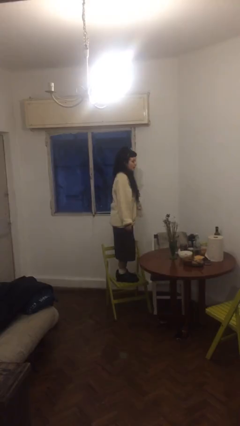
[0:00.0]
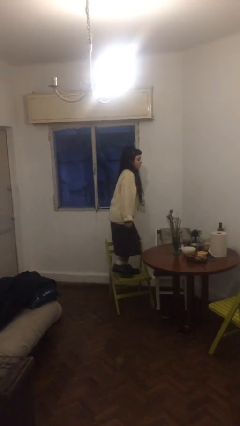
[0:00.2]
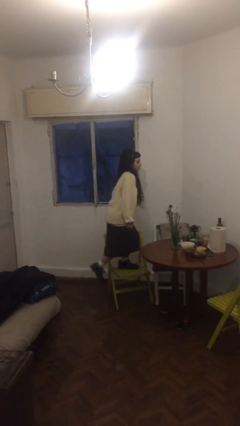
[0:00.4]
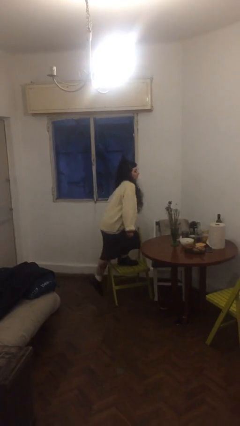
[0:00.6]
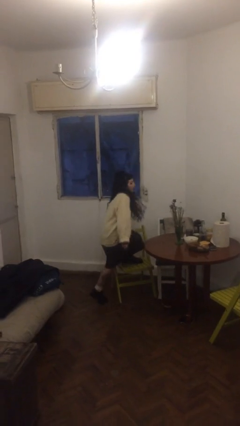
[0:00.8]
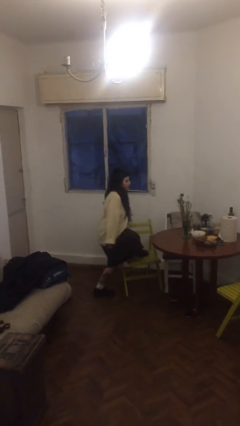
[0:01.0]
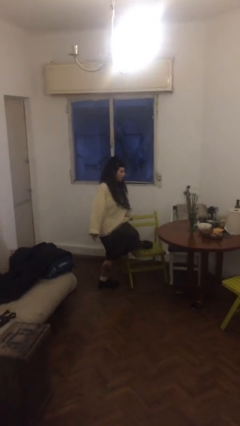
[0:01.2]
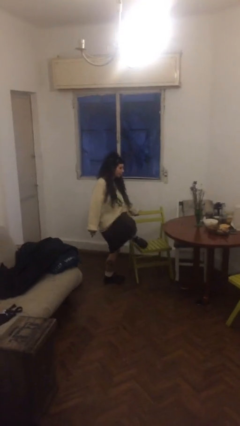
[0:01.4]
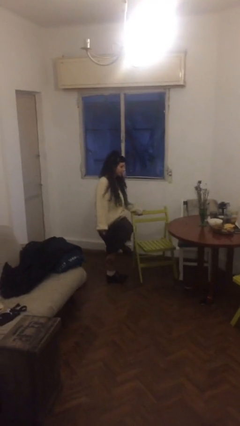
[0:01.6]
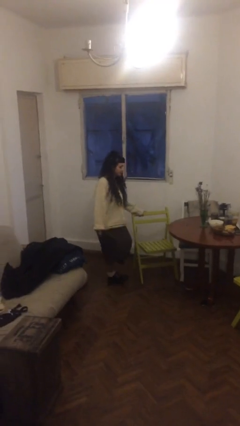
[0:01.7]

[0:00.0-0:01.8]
person climbs off chair

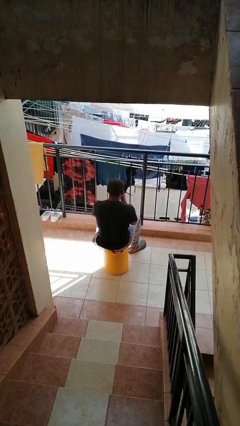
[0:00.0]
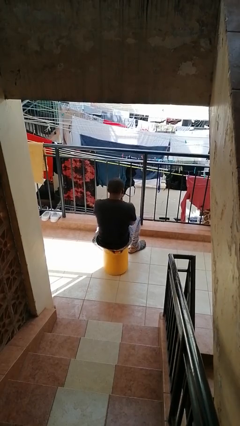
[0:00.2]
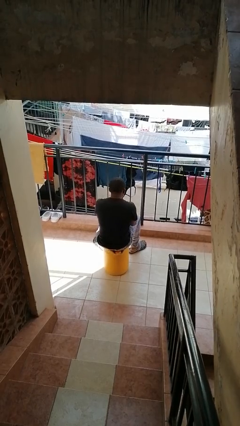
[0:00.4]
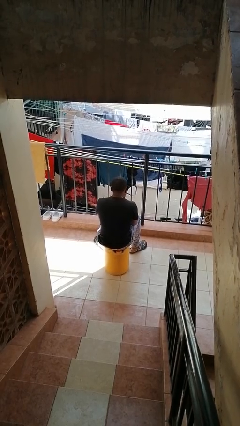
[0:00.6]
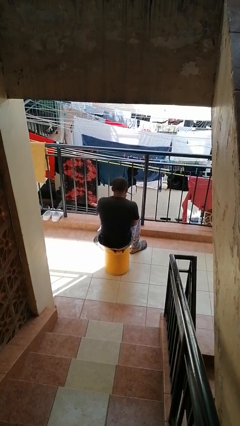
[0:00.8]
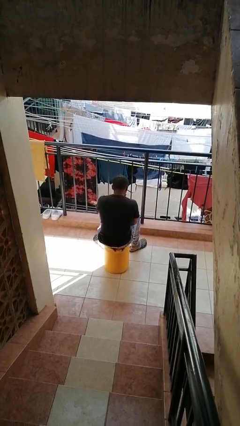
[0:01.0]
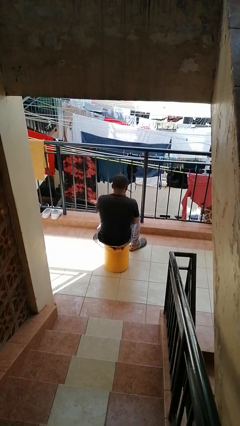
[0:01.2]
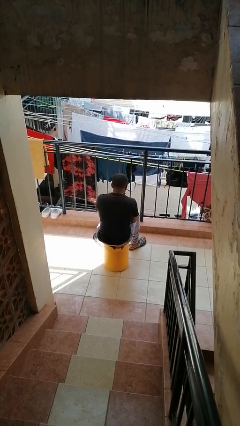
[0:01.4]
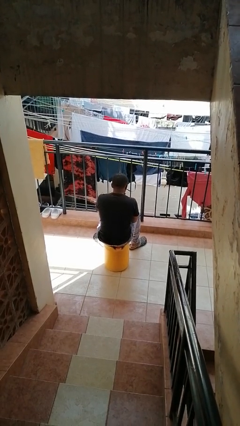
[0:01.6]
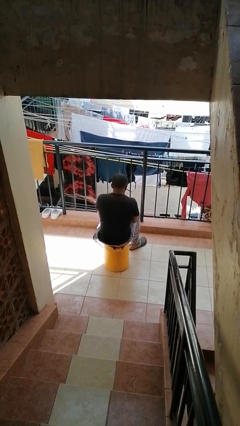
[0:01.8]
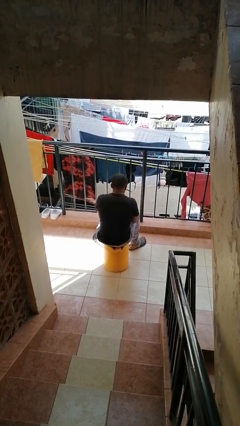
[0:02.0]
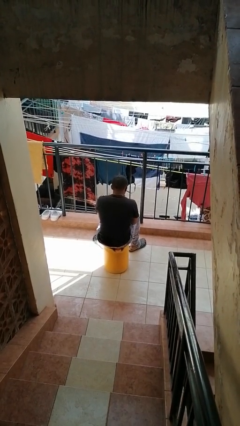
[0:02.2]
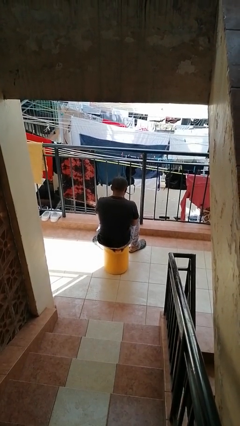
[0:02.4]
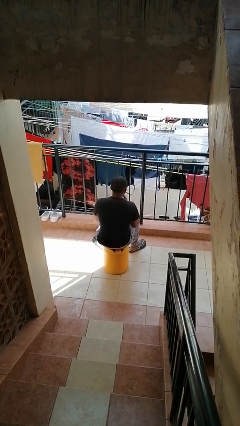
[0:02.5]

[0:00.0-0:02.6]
person blows into hands

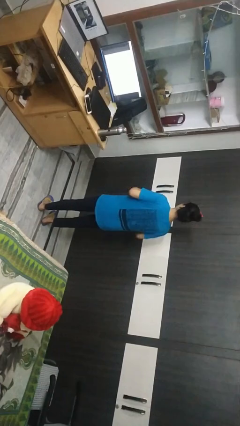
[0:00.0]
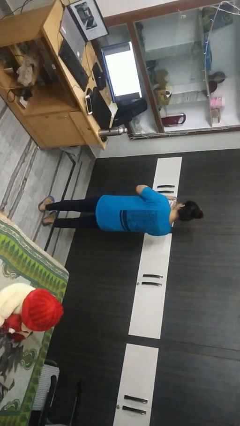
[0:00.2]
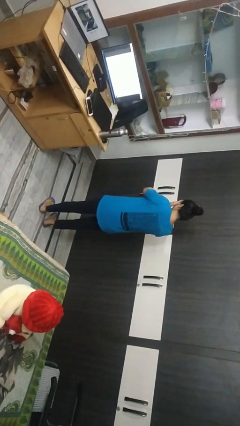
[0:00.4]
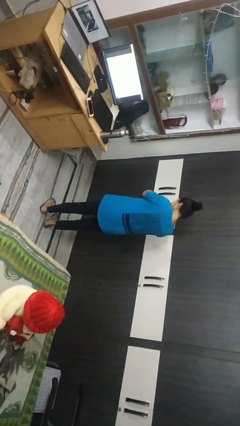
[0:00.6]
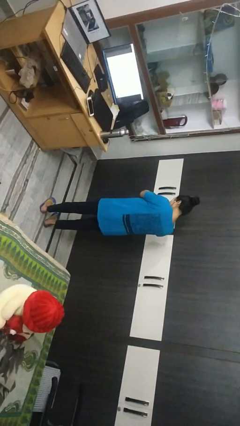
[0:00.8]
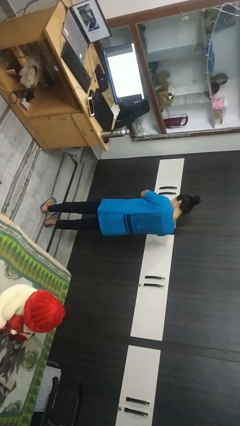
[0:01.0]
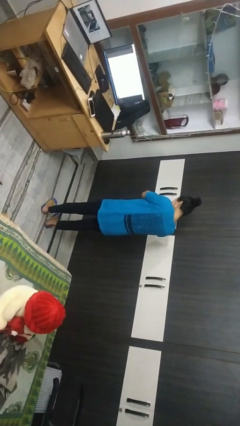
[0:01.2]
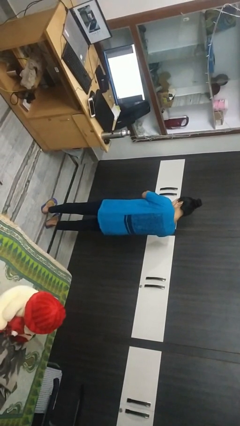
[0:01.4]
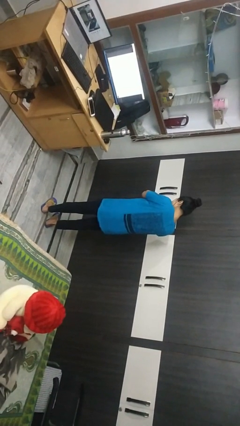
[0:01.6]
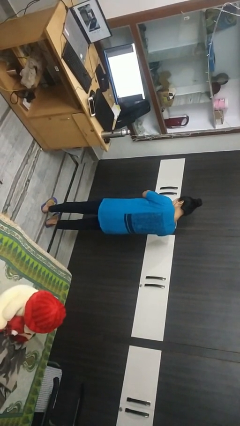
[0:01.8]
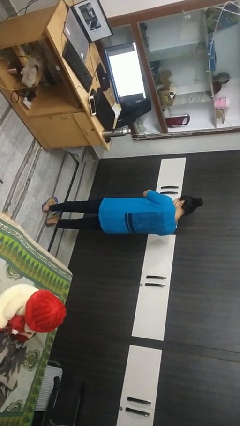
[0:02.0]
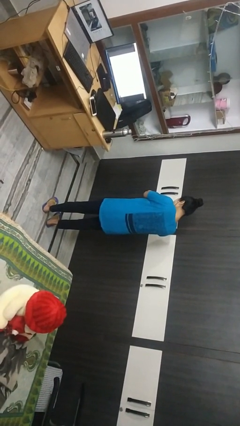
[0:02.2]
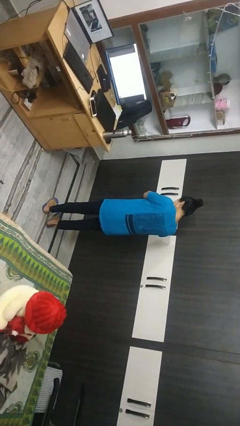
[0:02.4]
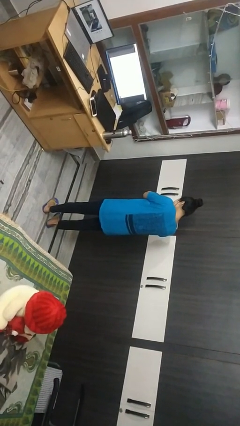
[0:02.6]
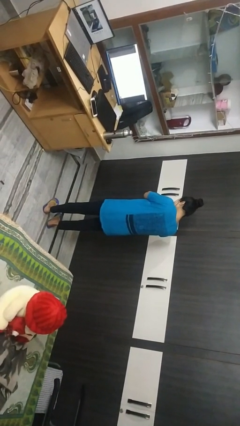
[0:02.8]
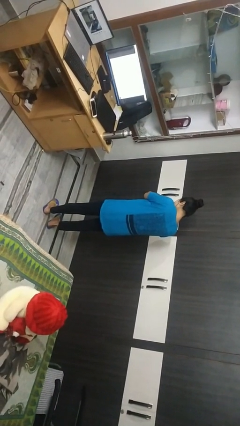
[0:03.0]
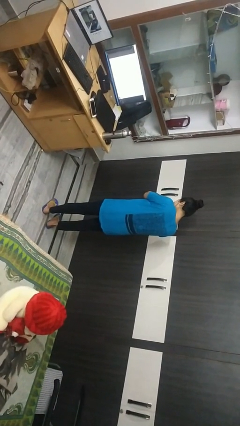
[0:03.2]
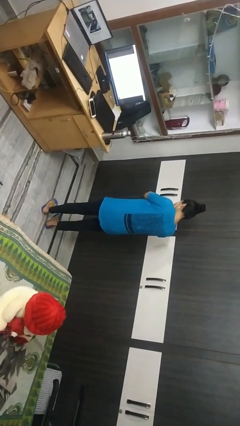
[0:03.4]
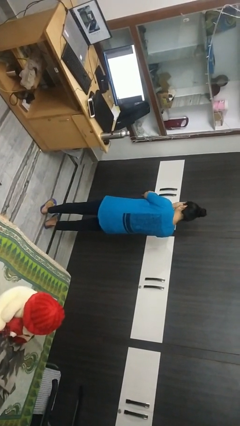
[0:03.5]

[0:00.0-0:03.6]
person covers face with hands

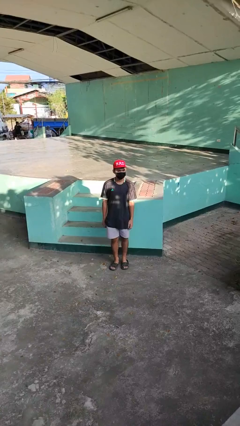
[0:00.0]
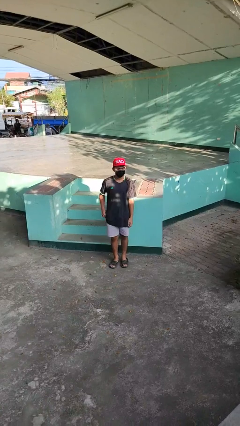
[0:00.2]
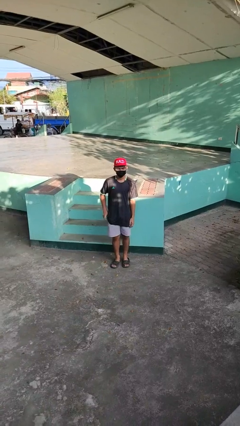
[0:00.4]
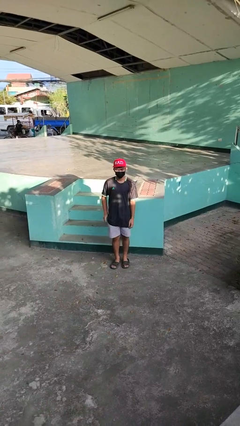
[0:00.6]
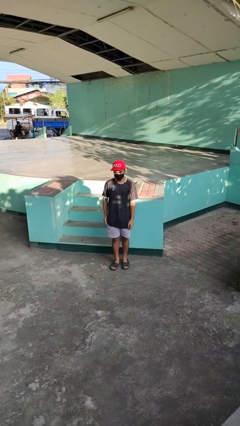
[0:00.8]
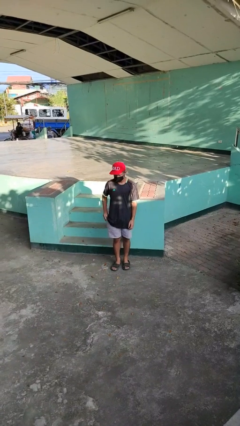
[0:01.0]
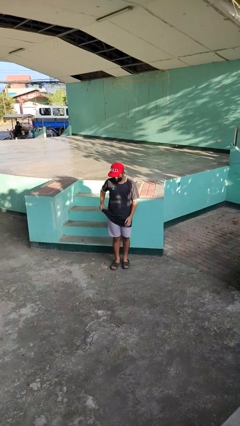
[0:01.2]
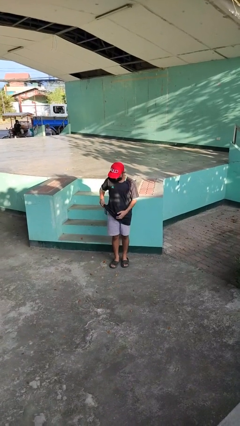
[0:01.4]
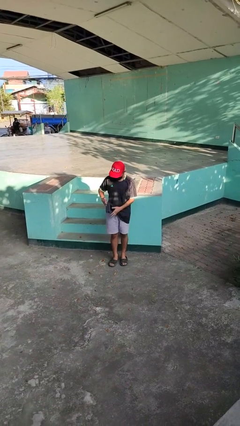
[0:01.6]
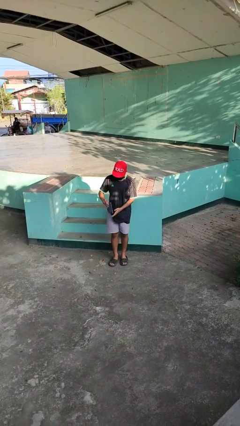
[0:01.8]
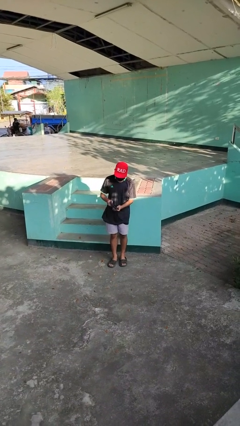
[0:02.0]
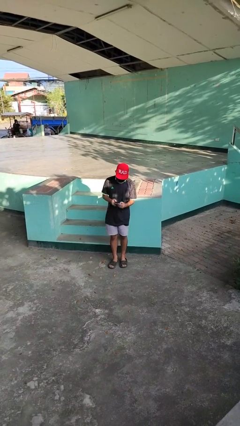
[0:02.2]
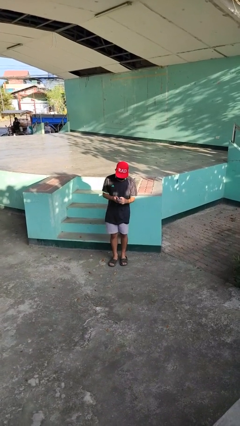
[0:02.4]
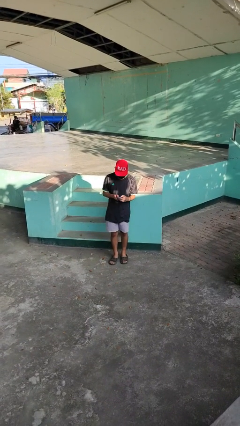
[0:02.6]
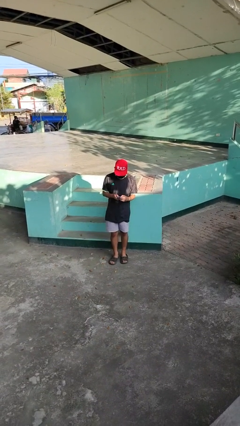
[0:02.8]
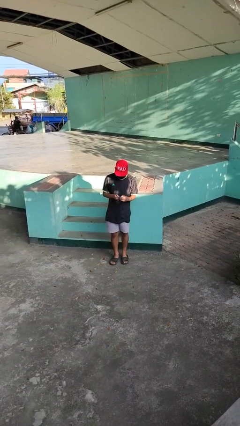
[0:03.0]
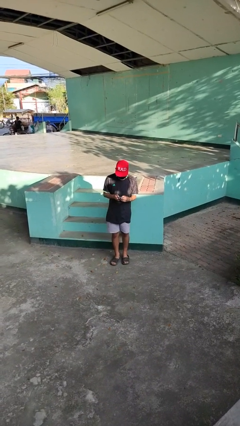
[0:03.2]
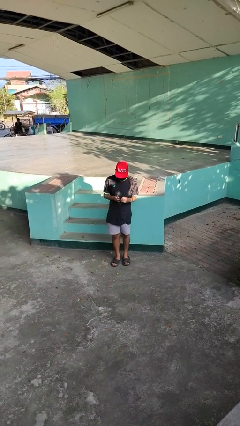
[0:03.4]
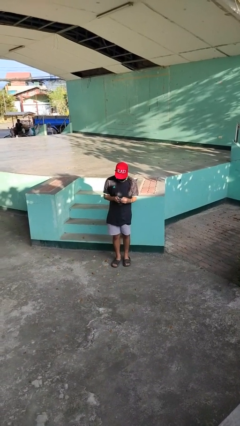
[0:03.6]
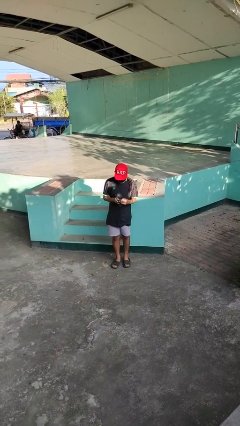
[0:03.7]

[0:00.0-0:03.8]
person takes phone from pocket

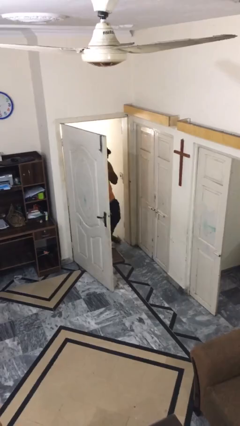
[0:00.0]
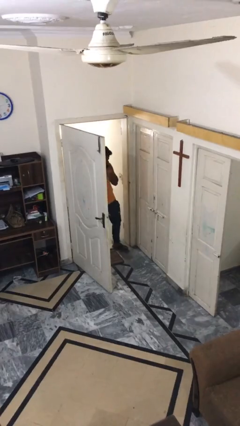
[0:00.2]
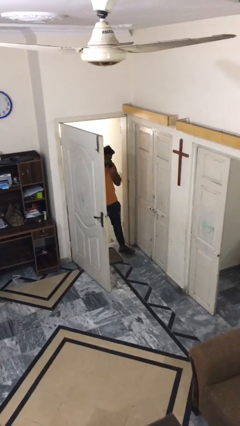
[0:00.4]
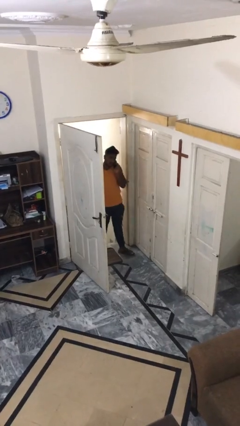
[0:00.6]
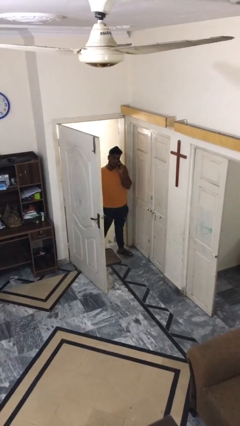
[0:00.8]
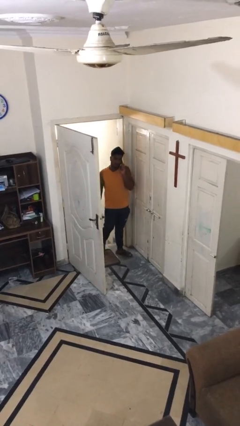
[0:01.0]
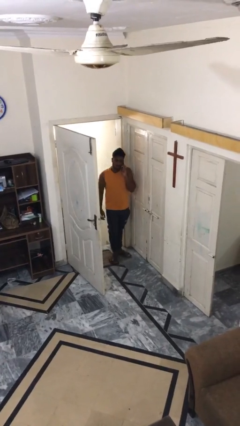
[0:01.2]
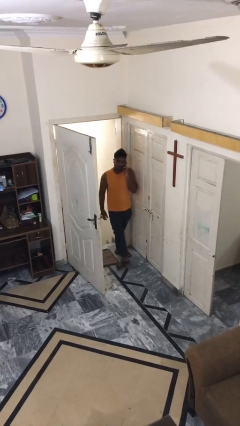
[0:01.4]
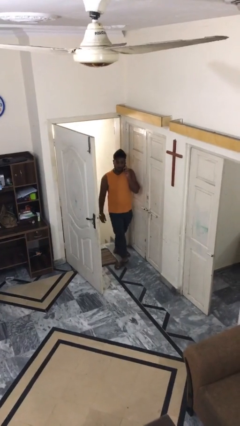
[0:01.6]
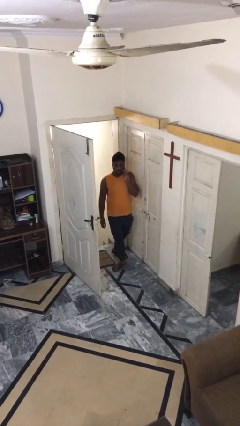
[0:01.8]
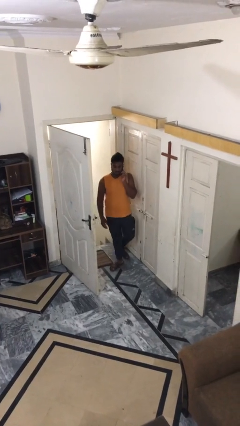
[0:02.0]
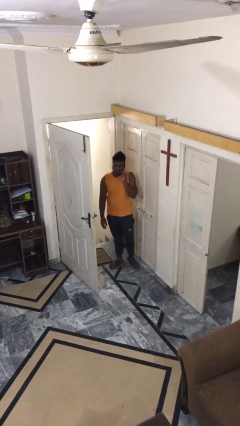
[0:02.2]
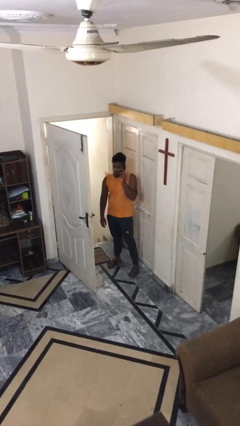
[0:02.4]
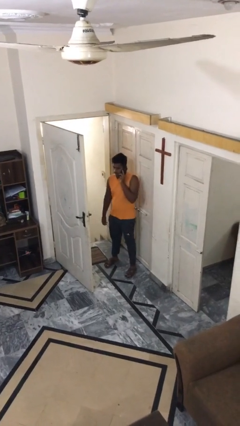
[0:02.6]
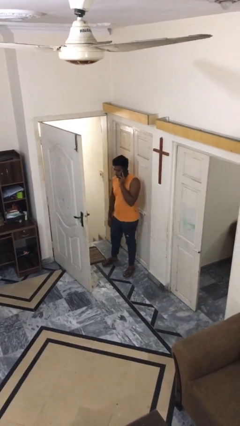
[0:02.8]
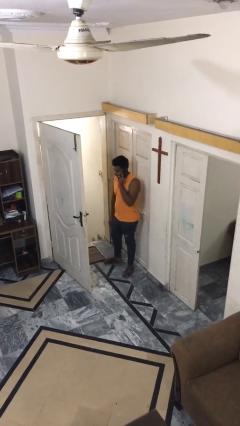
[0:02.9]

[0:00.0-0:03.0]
person enters scene through structure

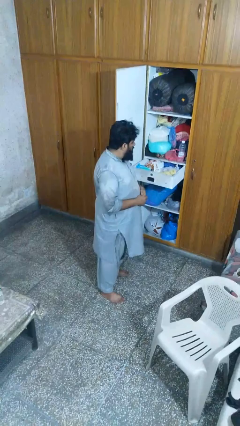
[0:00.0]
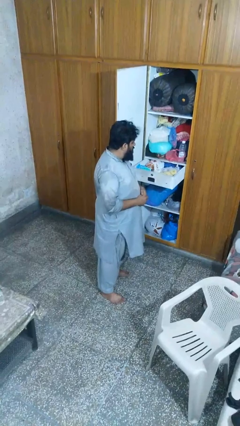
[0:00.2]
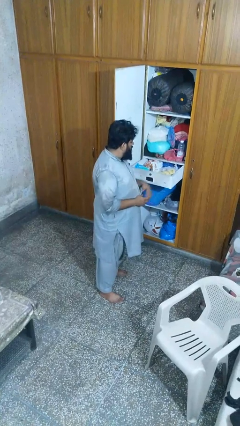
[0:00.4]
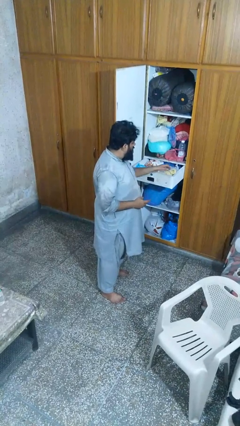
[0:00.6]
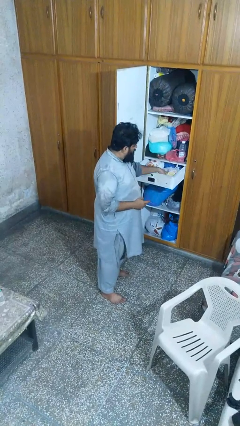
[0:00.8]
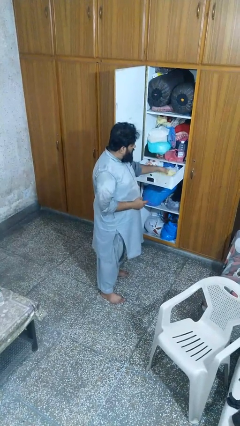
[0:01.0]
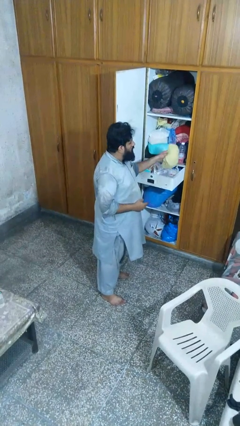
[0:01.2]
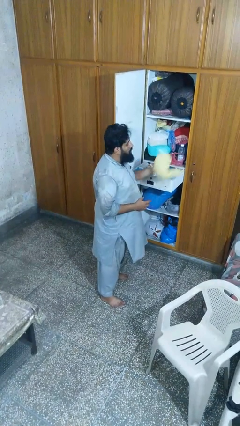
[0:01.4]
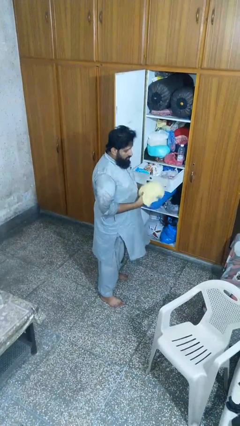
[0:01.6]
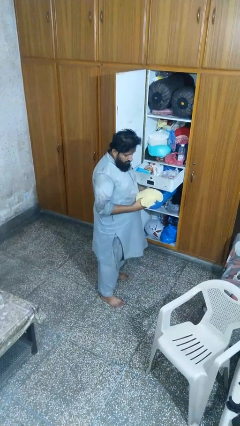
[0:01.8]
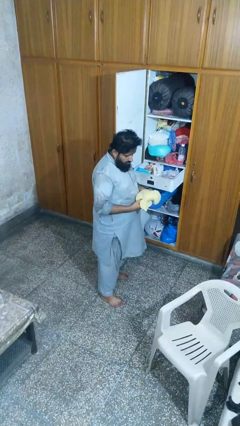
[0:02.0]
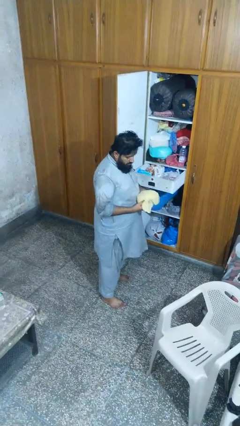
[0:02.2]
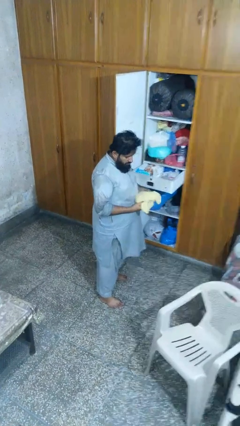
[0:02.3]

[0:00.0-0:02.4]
person takes clothes from dresser

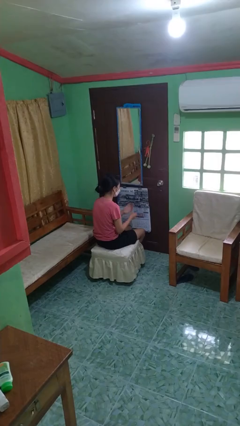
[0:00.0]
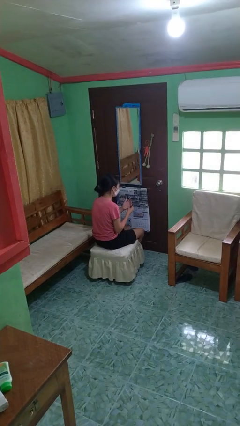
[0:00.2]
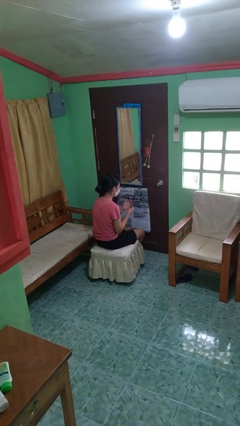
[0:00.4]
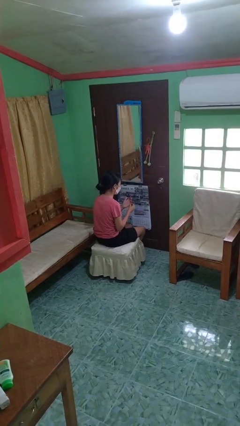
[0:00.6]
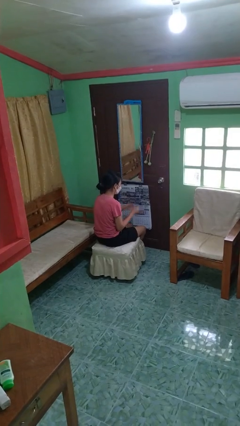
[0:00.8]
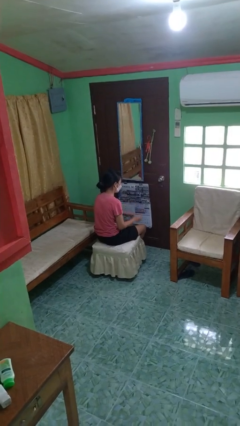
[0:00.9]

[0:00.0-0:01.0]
person takes off ring
